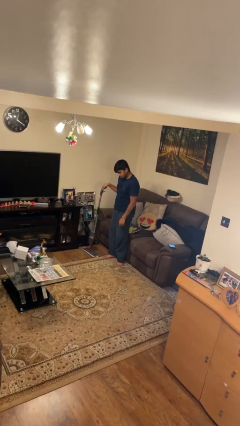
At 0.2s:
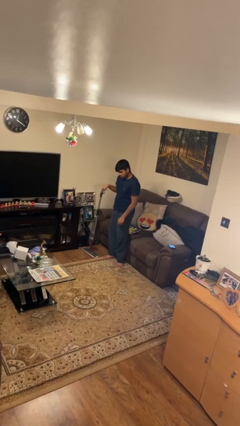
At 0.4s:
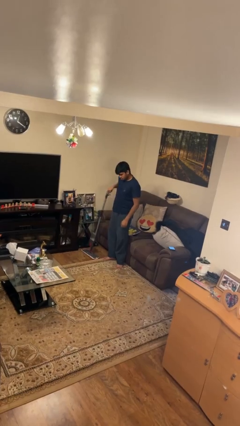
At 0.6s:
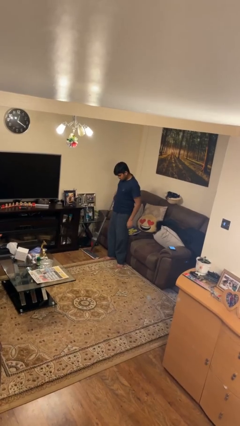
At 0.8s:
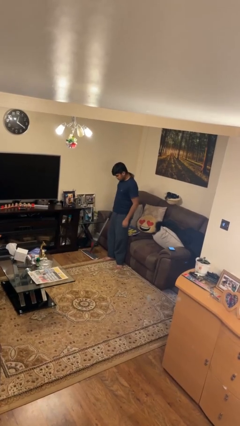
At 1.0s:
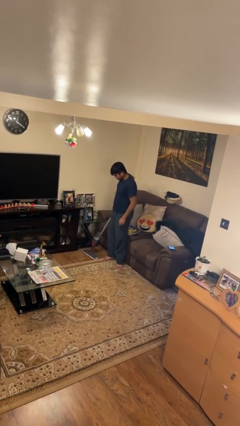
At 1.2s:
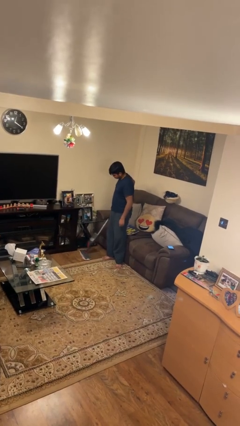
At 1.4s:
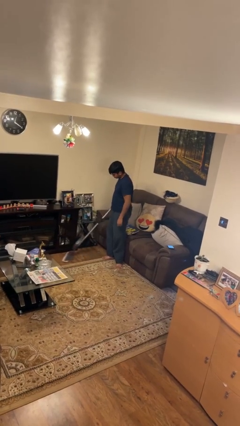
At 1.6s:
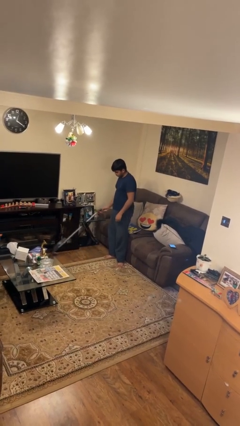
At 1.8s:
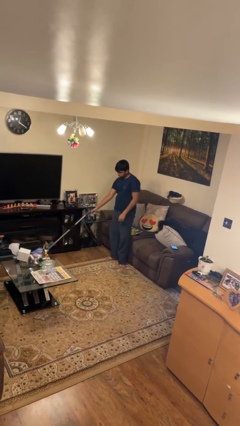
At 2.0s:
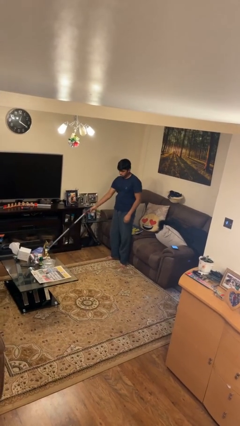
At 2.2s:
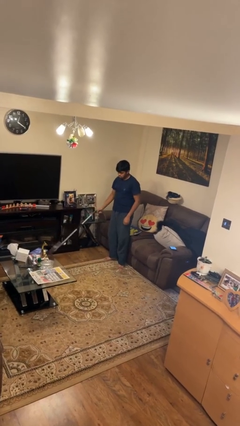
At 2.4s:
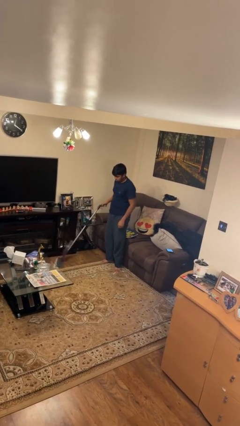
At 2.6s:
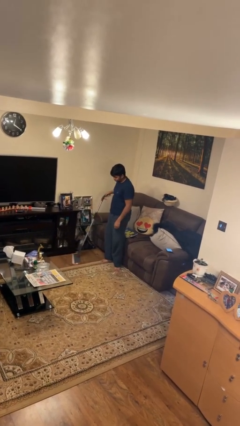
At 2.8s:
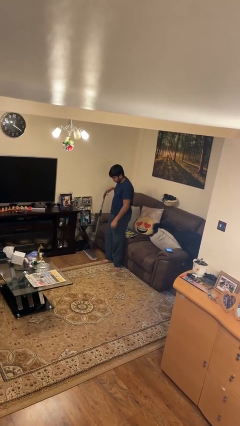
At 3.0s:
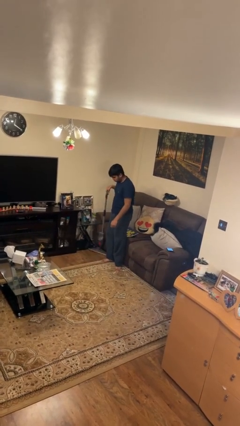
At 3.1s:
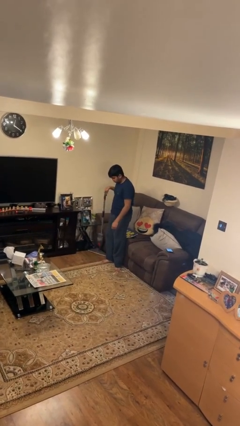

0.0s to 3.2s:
person mops

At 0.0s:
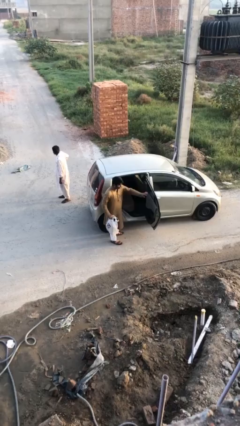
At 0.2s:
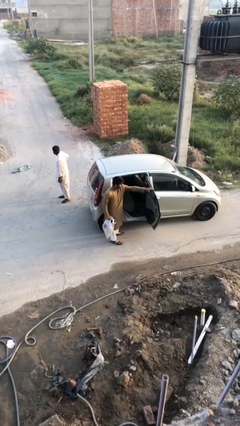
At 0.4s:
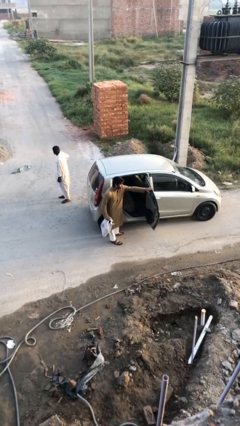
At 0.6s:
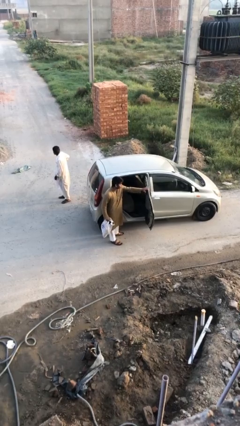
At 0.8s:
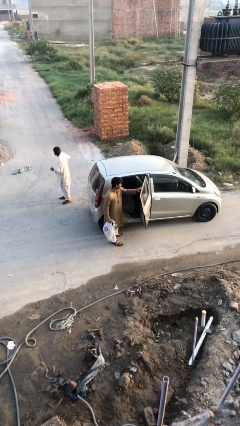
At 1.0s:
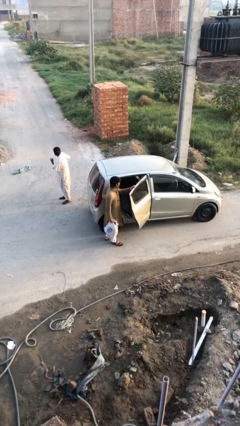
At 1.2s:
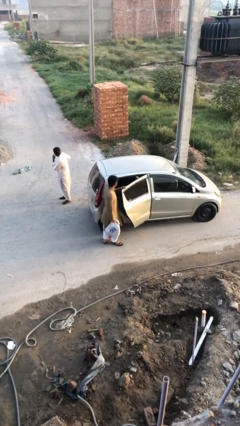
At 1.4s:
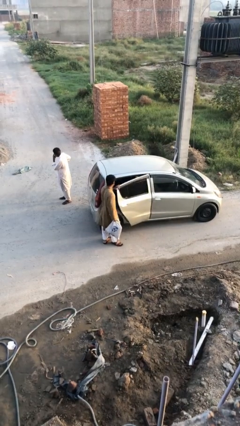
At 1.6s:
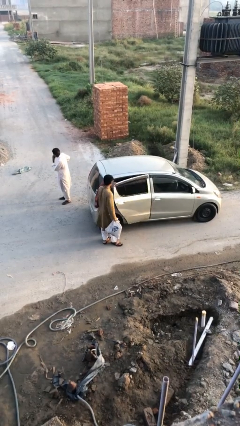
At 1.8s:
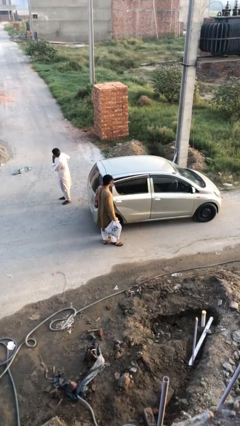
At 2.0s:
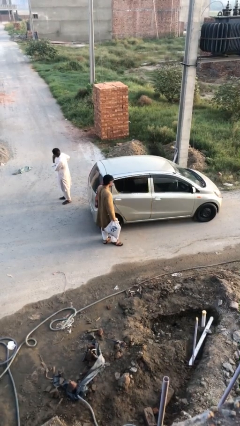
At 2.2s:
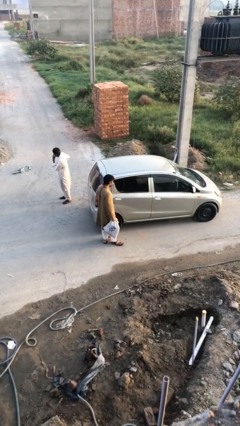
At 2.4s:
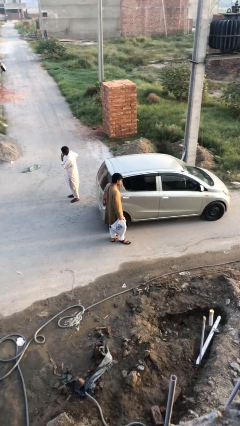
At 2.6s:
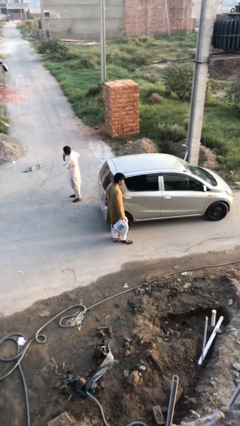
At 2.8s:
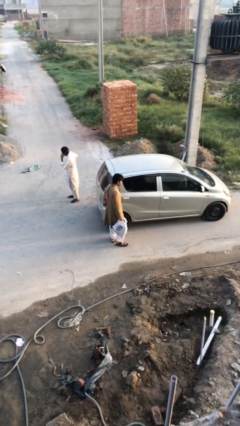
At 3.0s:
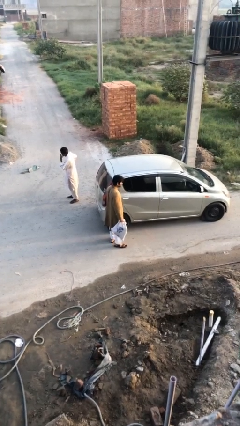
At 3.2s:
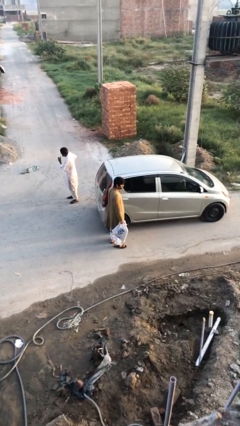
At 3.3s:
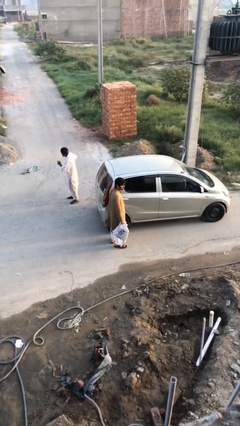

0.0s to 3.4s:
person closes car door

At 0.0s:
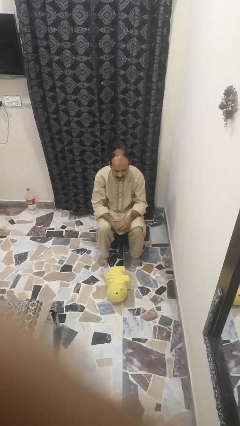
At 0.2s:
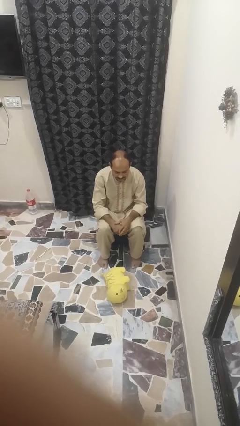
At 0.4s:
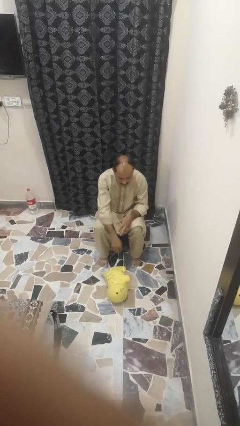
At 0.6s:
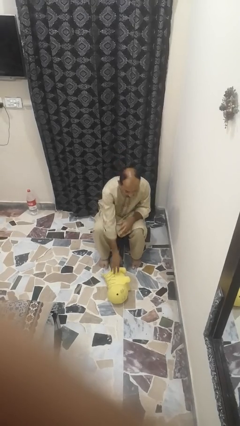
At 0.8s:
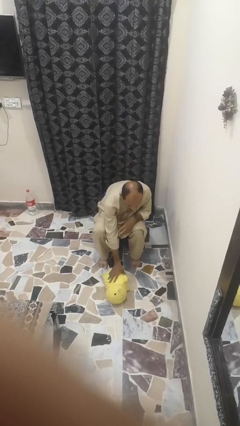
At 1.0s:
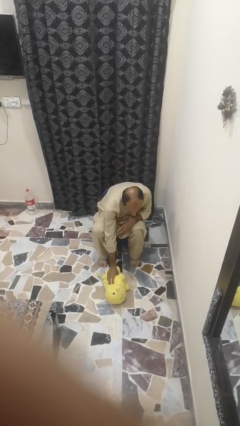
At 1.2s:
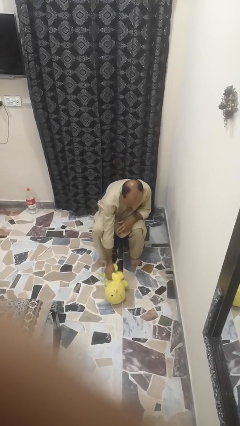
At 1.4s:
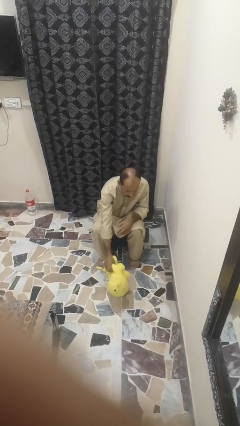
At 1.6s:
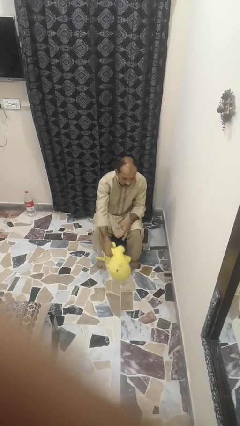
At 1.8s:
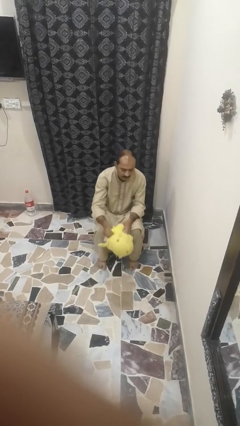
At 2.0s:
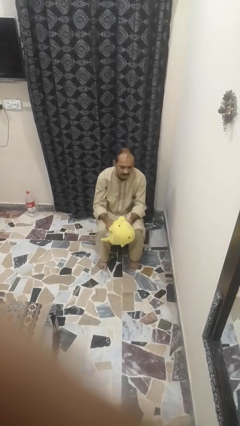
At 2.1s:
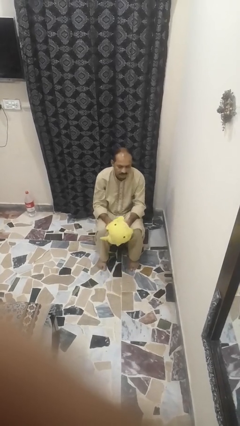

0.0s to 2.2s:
person picks up object from floor

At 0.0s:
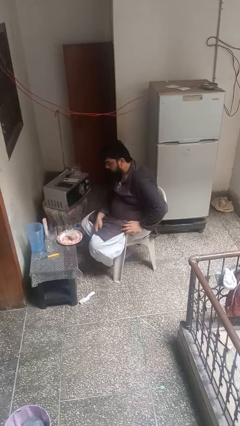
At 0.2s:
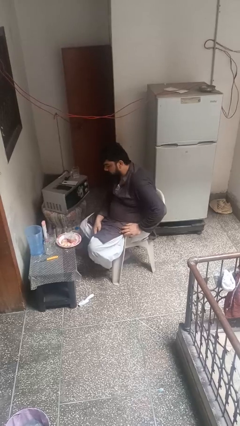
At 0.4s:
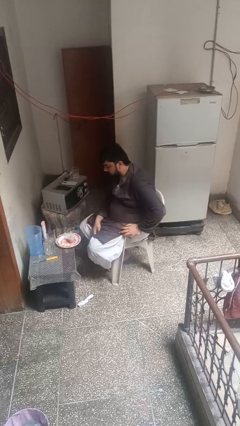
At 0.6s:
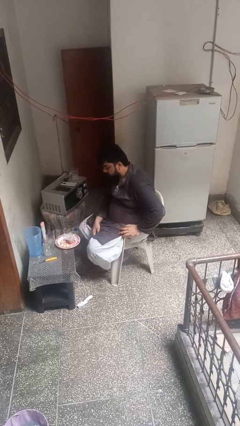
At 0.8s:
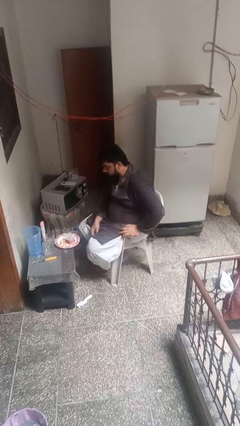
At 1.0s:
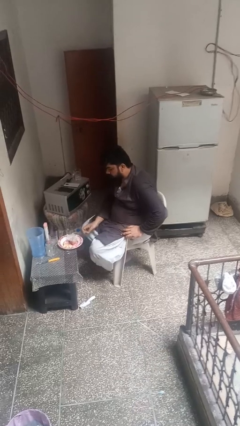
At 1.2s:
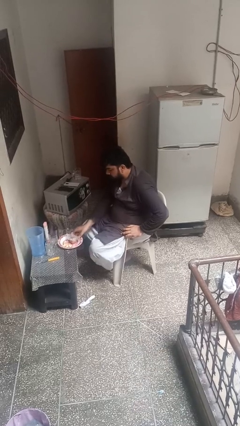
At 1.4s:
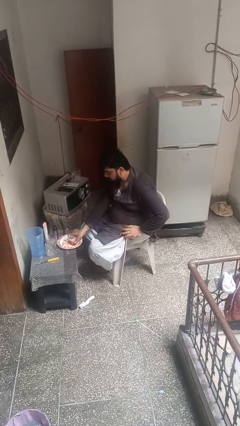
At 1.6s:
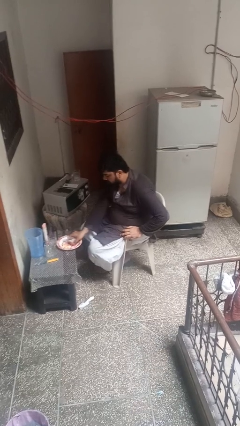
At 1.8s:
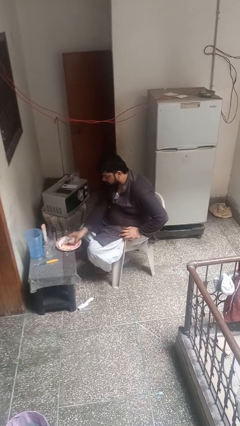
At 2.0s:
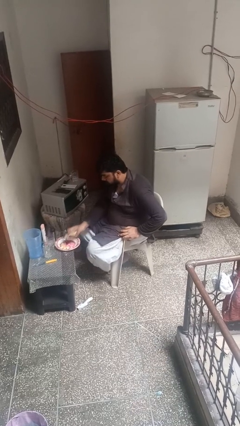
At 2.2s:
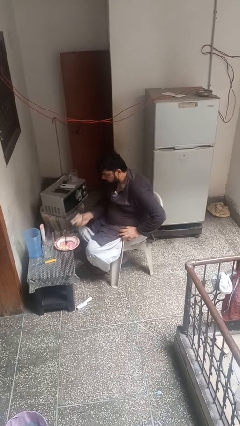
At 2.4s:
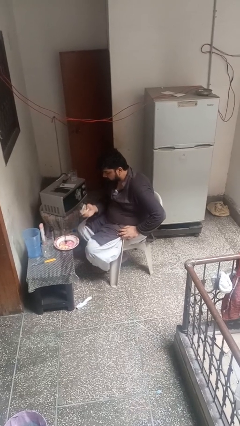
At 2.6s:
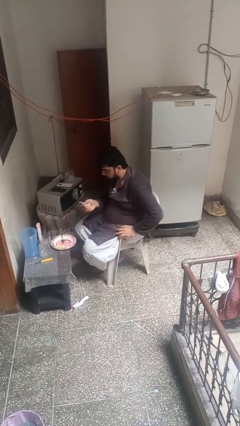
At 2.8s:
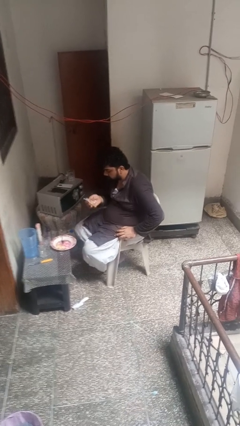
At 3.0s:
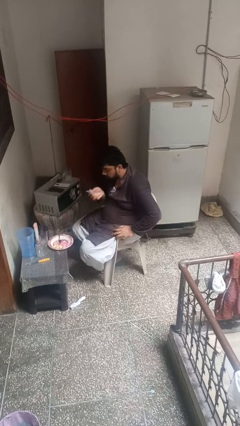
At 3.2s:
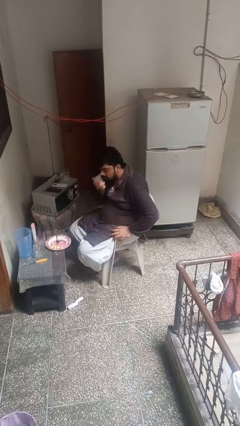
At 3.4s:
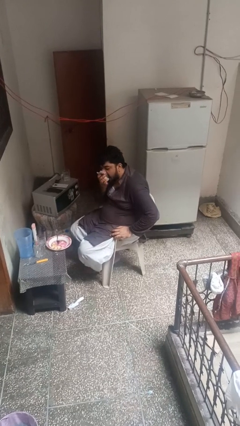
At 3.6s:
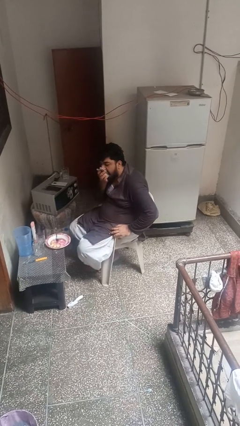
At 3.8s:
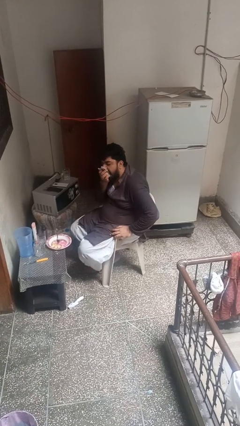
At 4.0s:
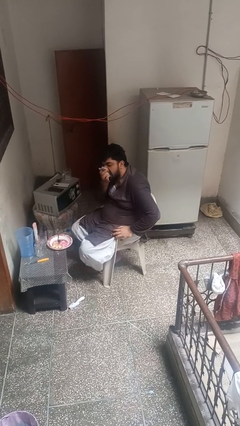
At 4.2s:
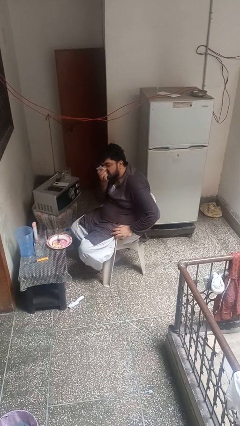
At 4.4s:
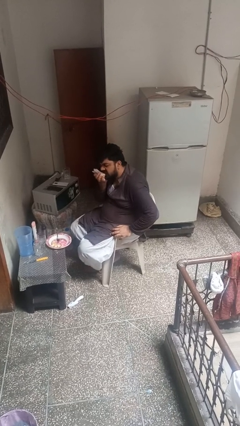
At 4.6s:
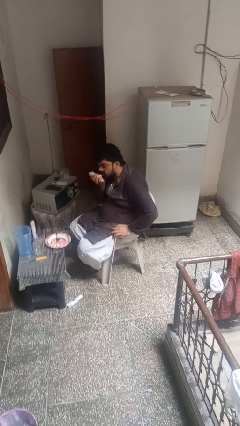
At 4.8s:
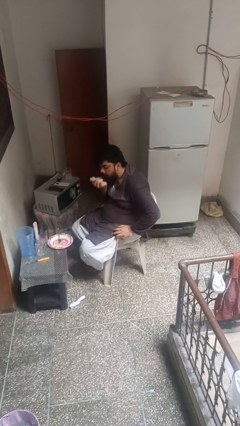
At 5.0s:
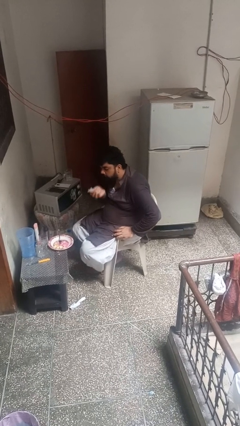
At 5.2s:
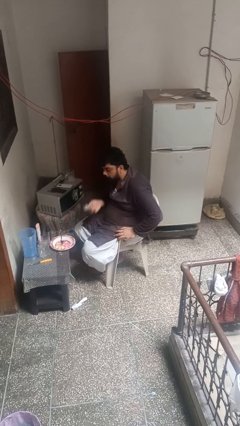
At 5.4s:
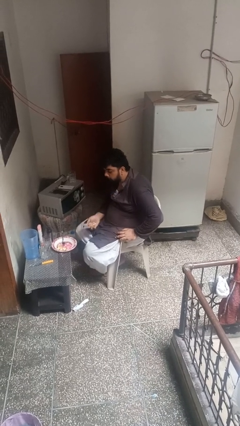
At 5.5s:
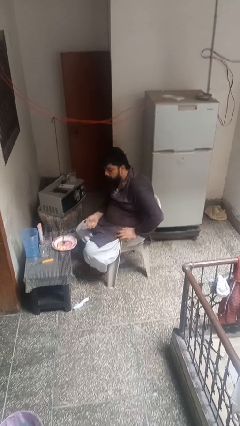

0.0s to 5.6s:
person eats with hands

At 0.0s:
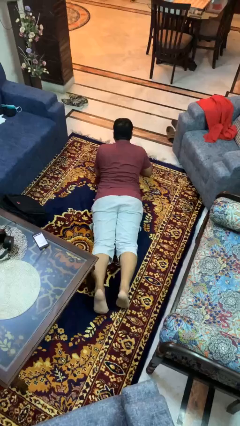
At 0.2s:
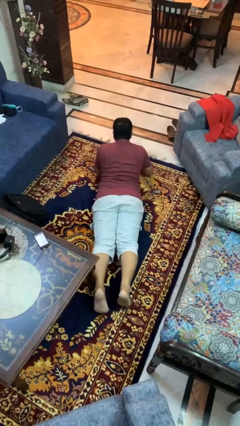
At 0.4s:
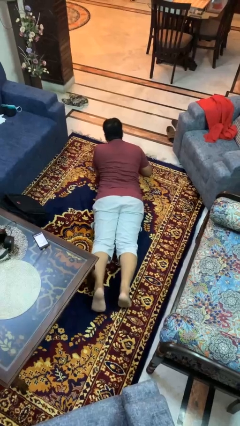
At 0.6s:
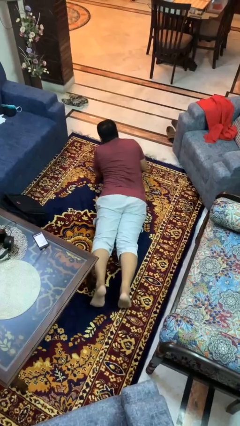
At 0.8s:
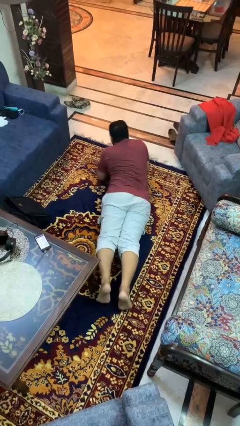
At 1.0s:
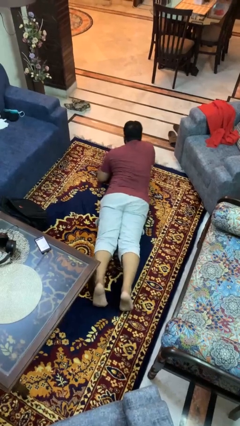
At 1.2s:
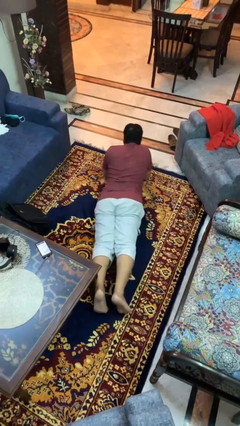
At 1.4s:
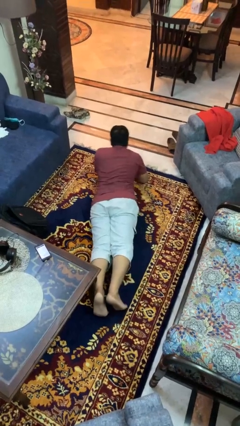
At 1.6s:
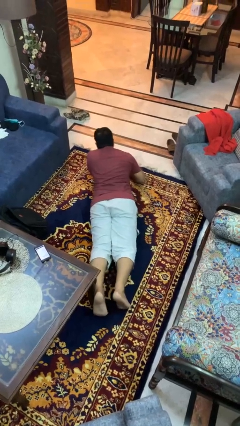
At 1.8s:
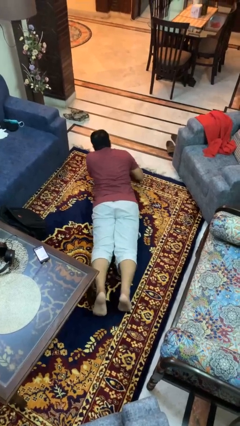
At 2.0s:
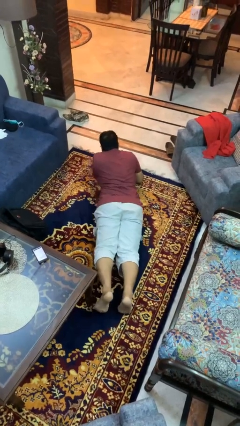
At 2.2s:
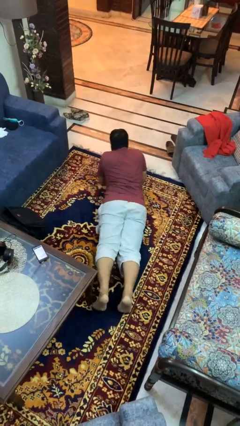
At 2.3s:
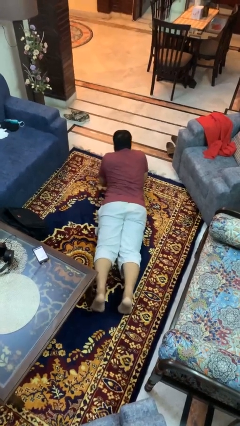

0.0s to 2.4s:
person crawls

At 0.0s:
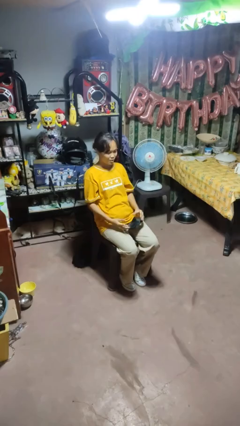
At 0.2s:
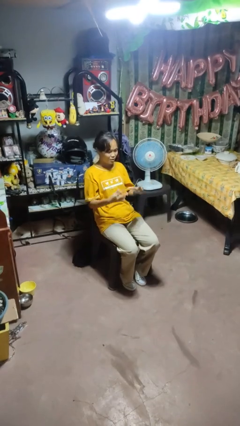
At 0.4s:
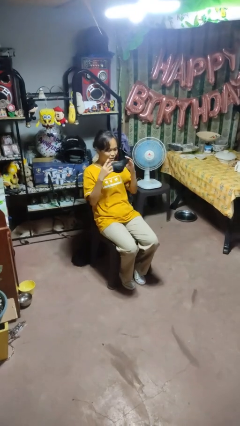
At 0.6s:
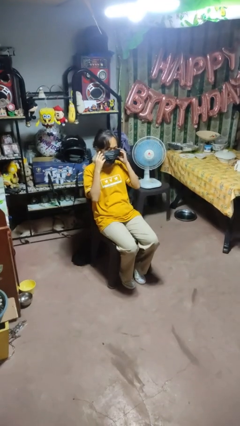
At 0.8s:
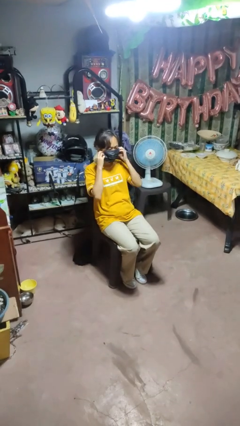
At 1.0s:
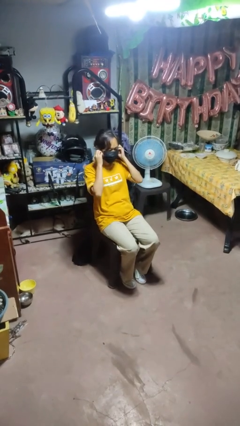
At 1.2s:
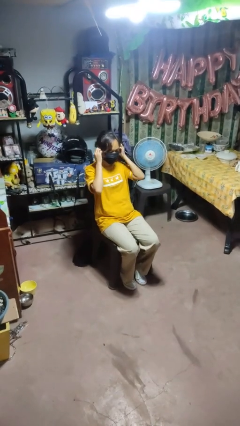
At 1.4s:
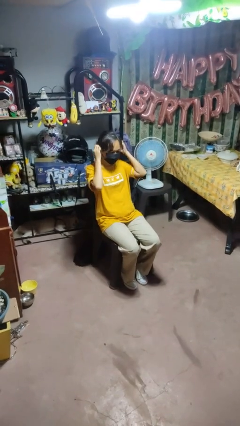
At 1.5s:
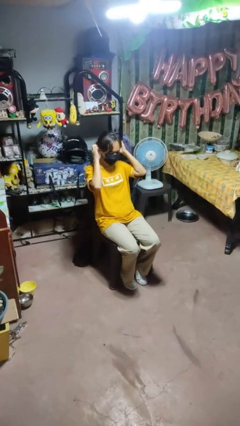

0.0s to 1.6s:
person puts on facemask
